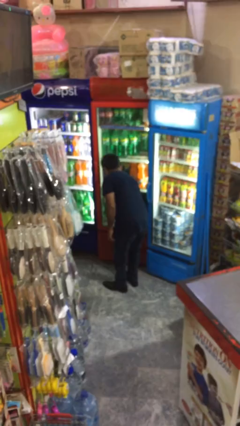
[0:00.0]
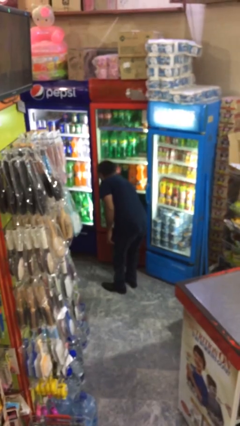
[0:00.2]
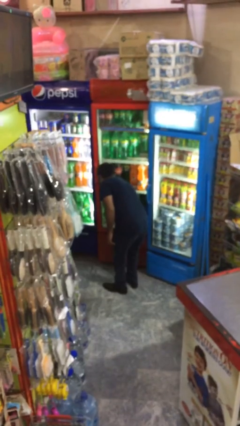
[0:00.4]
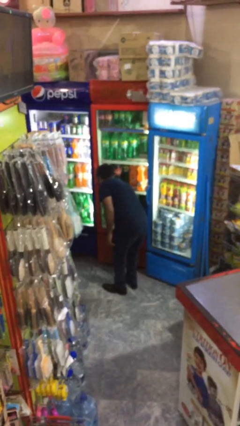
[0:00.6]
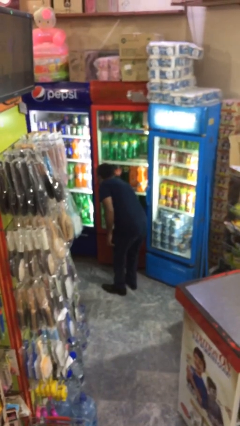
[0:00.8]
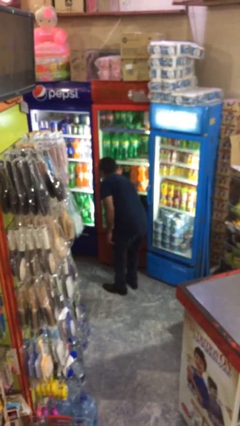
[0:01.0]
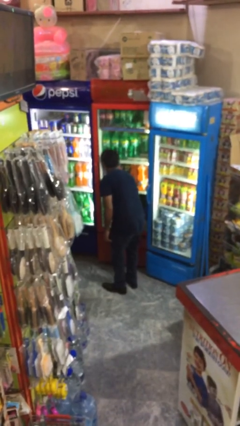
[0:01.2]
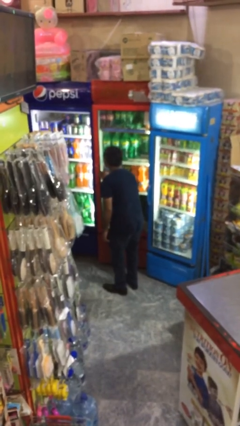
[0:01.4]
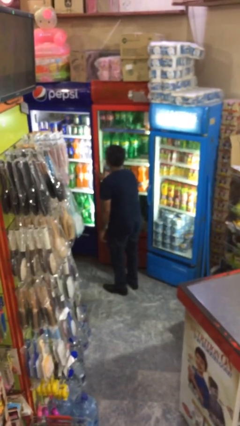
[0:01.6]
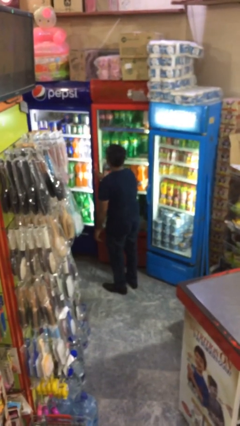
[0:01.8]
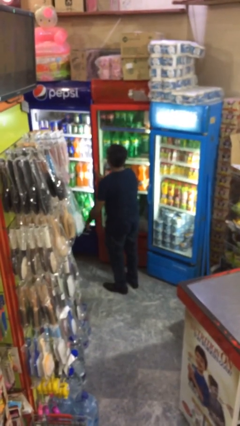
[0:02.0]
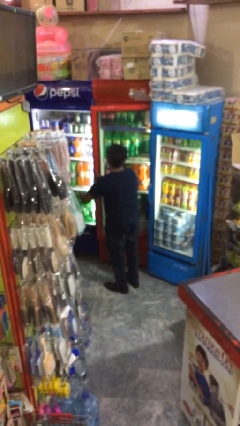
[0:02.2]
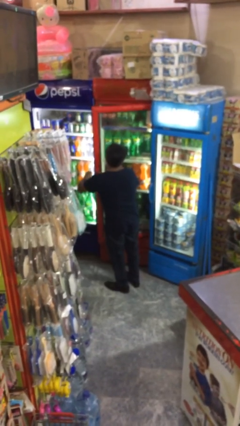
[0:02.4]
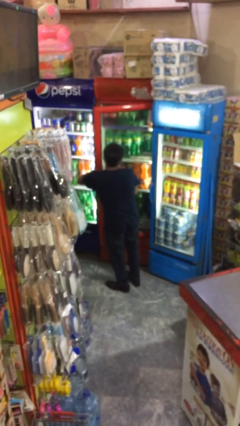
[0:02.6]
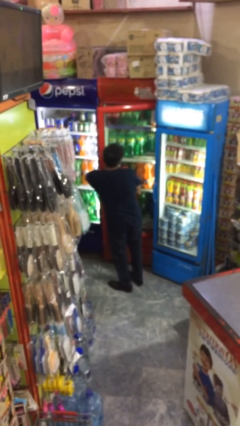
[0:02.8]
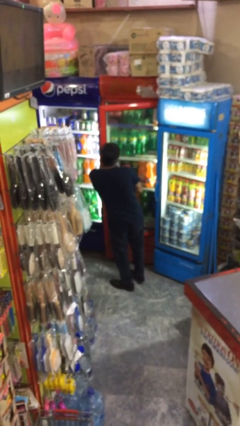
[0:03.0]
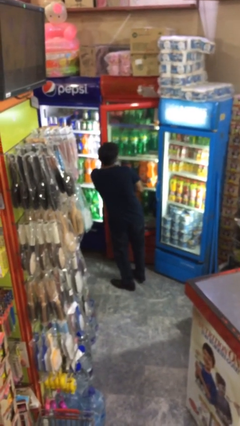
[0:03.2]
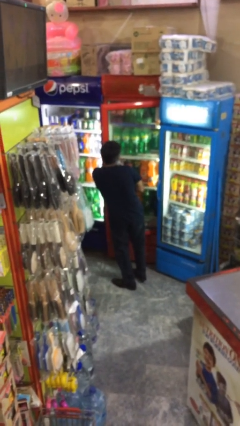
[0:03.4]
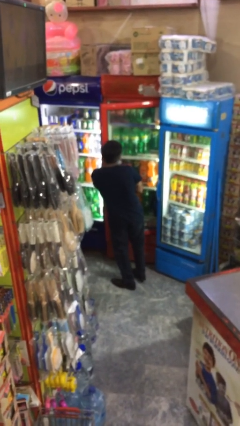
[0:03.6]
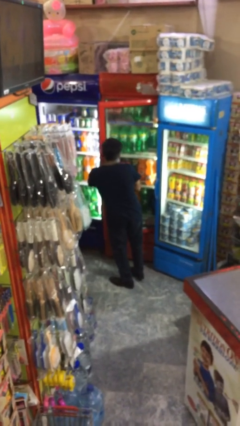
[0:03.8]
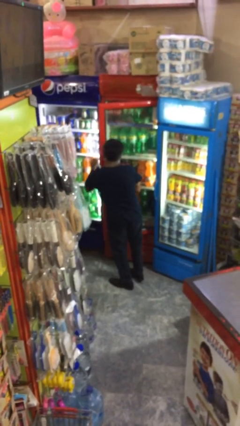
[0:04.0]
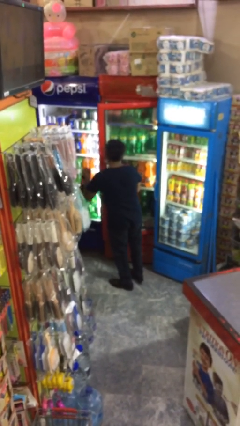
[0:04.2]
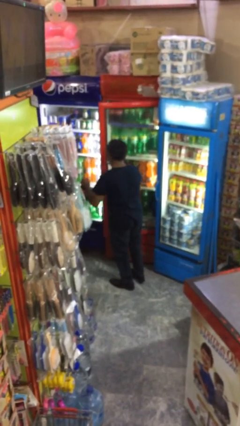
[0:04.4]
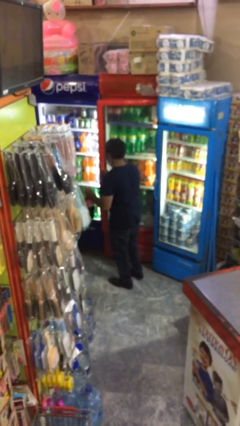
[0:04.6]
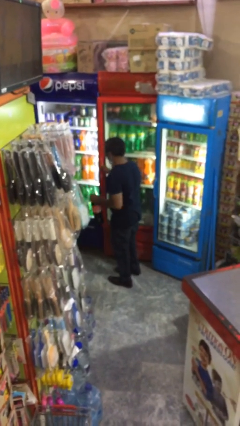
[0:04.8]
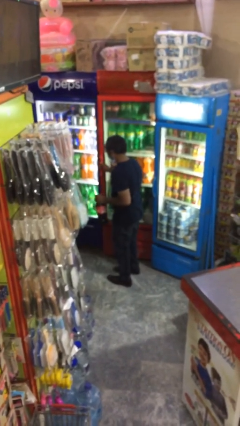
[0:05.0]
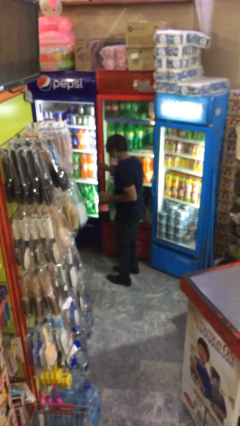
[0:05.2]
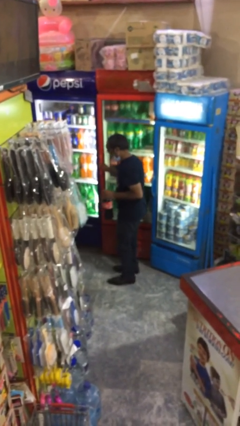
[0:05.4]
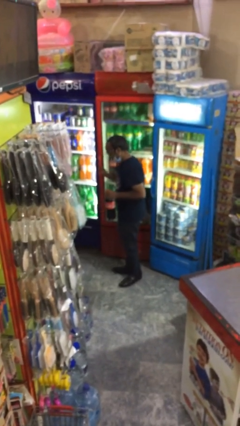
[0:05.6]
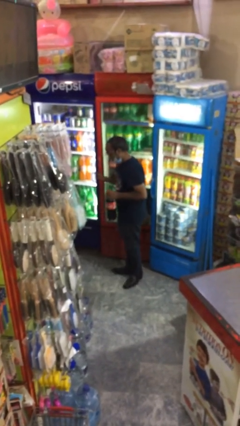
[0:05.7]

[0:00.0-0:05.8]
person purchases from machine

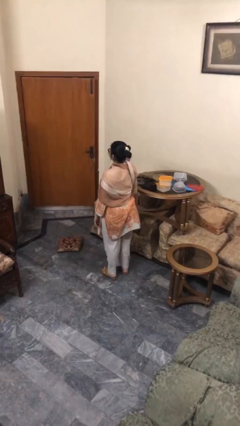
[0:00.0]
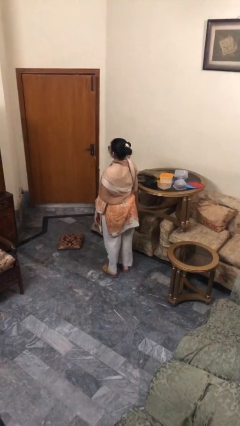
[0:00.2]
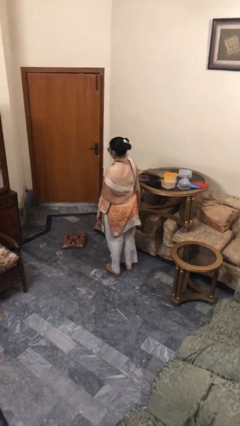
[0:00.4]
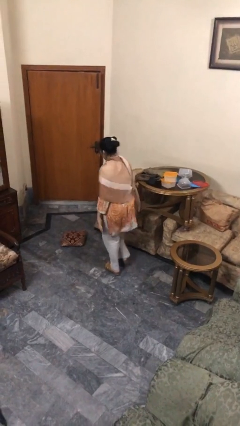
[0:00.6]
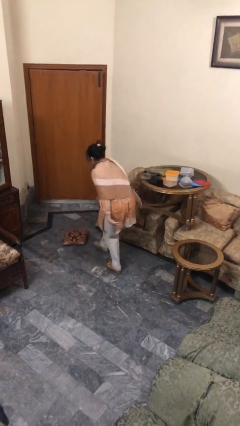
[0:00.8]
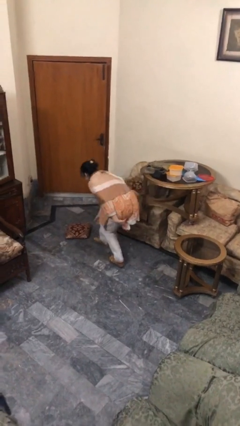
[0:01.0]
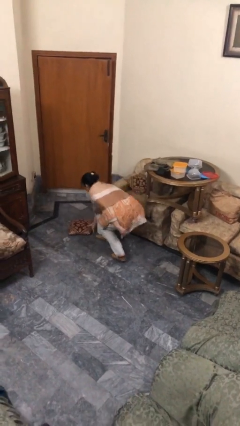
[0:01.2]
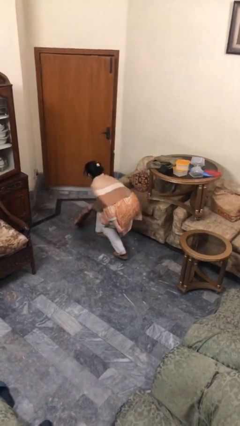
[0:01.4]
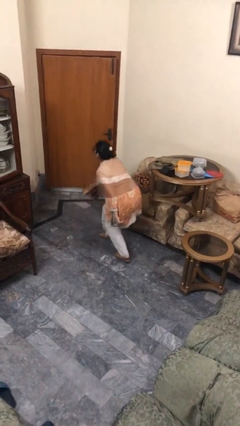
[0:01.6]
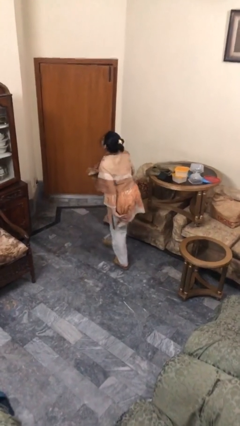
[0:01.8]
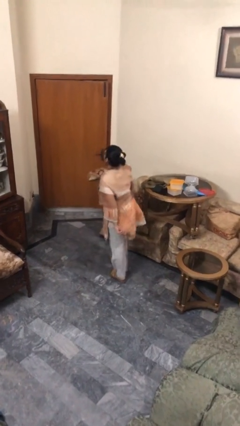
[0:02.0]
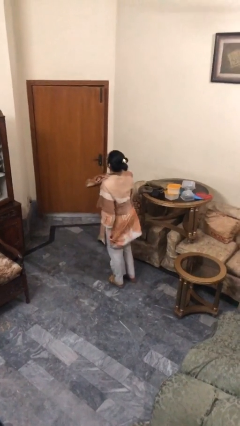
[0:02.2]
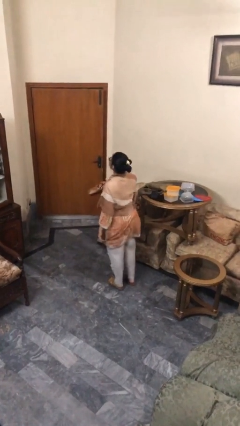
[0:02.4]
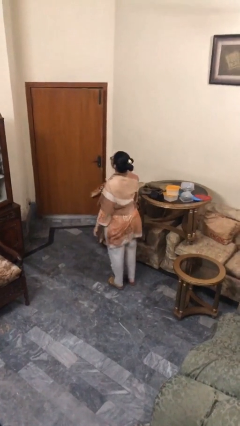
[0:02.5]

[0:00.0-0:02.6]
person picks up object from floor

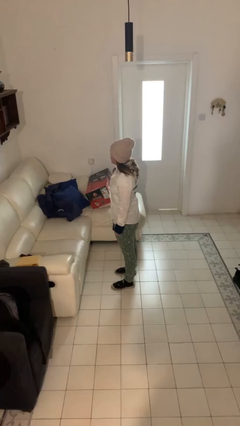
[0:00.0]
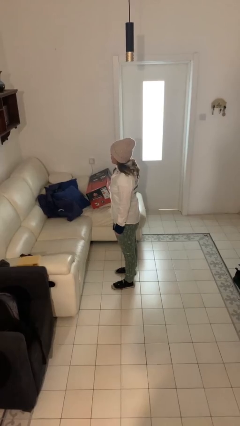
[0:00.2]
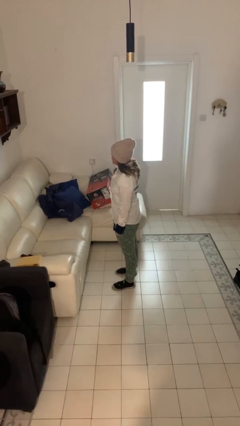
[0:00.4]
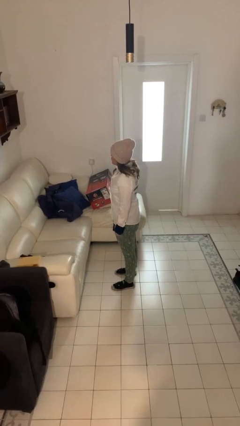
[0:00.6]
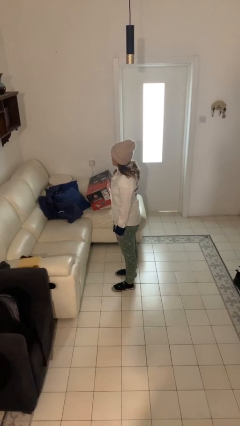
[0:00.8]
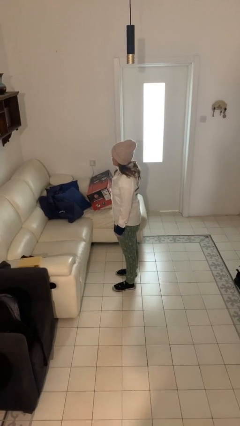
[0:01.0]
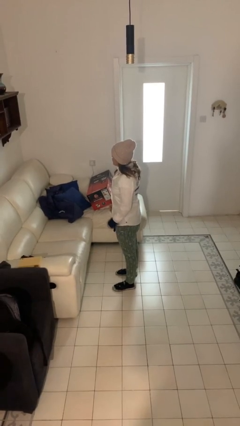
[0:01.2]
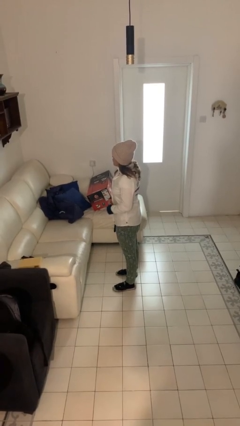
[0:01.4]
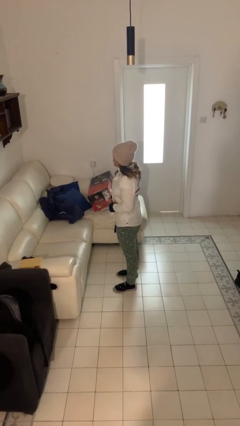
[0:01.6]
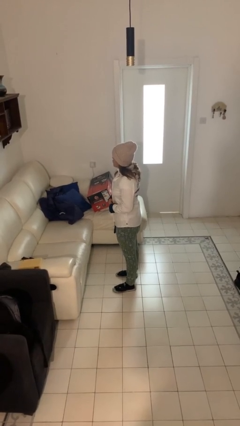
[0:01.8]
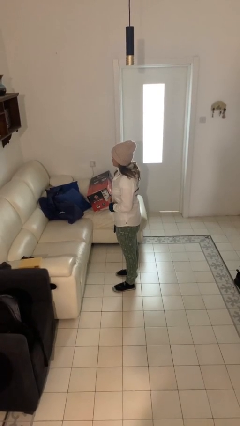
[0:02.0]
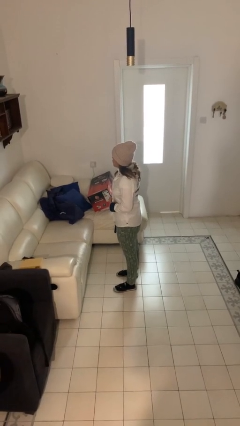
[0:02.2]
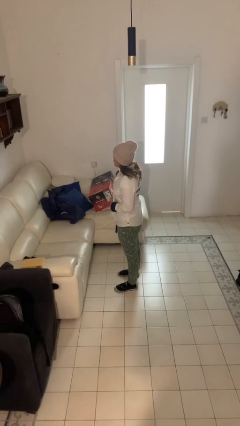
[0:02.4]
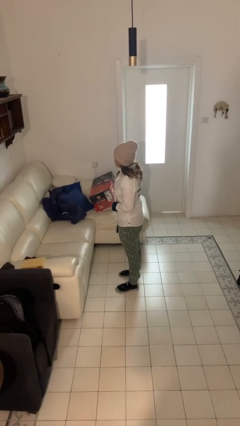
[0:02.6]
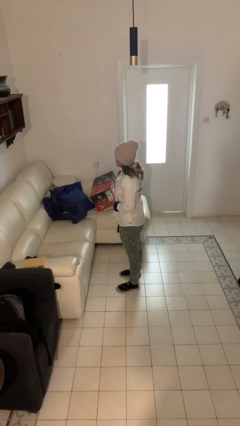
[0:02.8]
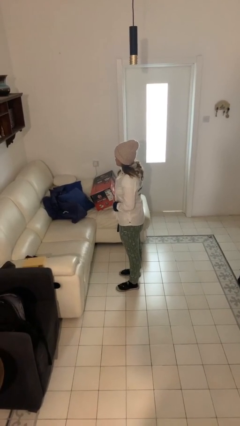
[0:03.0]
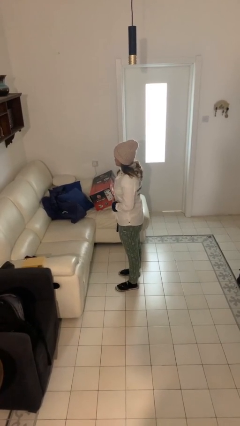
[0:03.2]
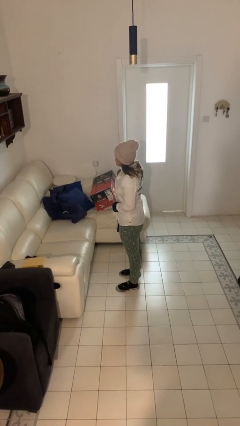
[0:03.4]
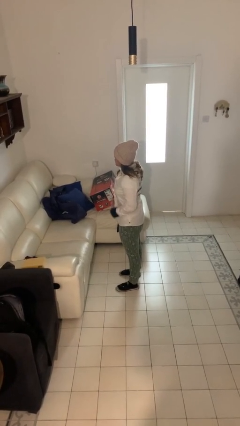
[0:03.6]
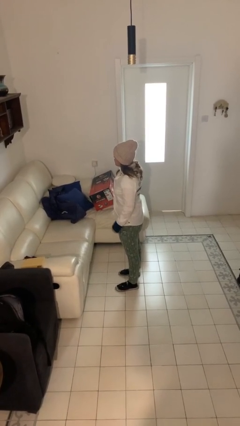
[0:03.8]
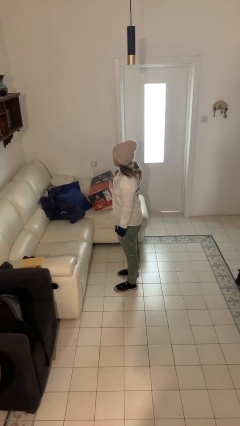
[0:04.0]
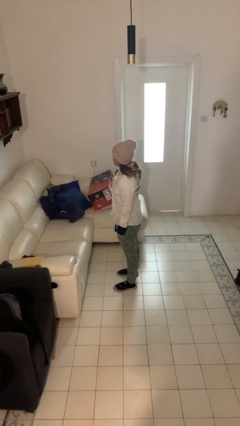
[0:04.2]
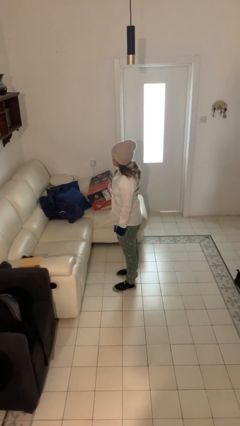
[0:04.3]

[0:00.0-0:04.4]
person buttons shirt

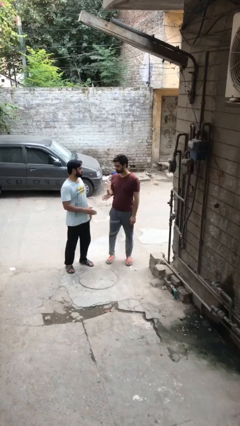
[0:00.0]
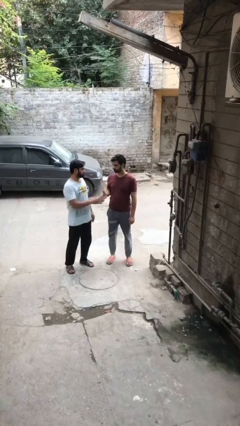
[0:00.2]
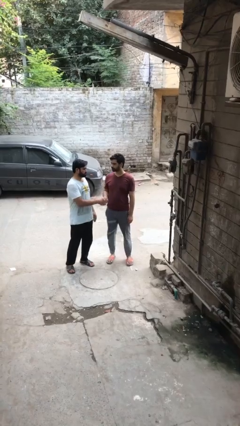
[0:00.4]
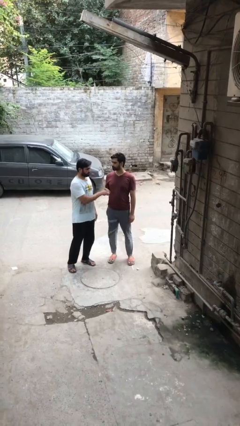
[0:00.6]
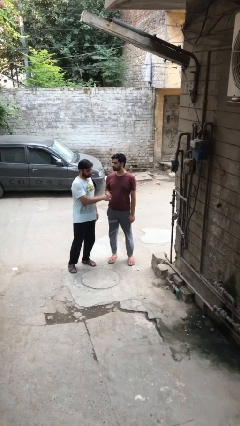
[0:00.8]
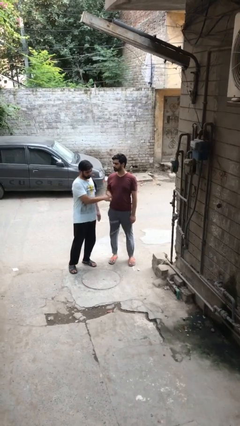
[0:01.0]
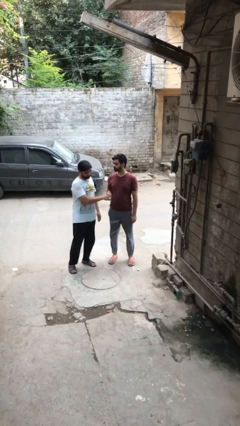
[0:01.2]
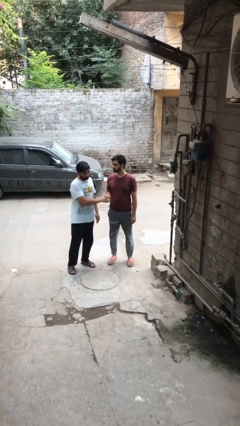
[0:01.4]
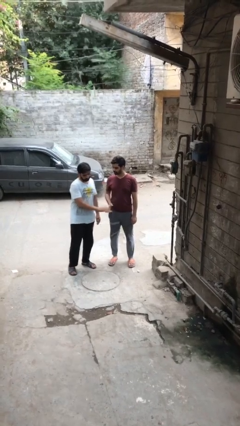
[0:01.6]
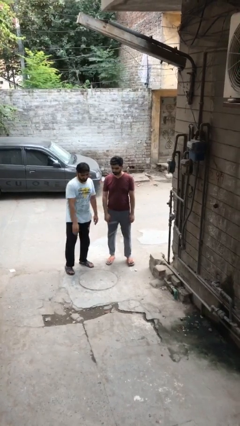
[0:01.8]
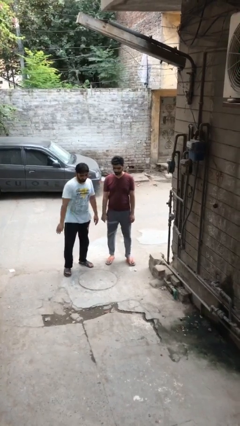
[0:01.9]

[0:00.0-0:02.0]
person shakes hand

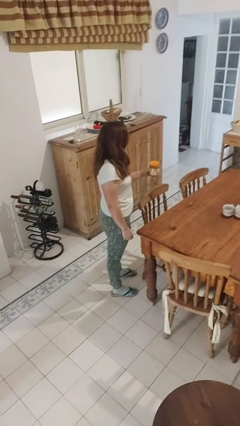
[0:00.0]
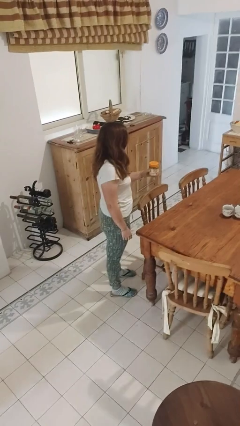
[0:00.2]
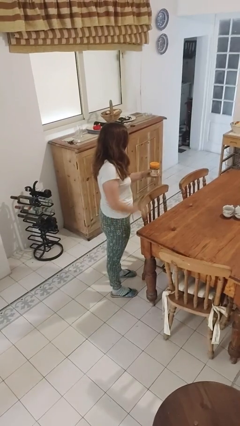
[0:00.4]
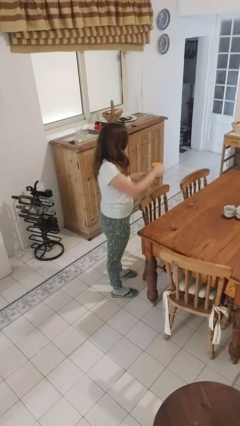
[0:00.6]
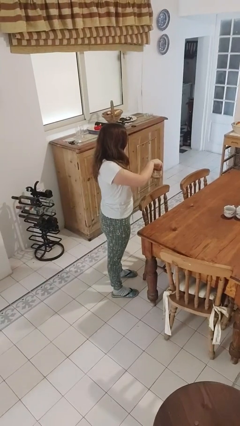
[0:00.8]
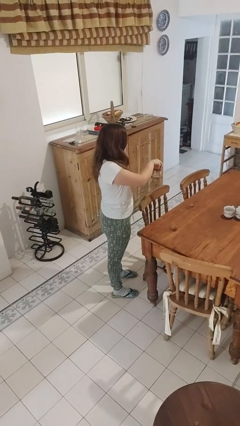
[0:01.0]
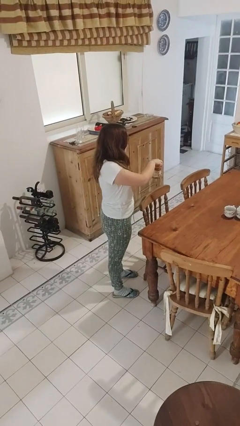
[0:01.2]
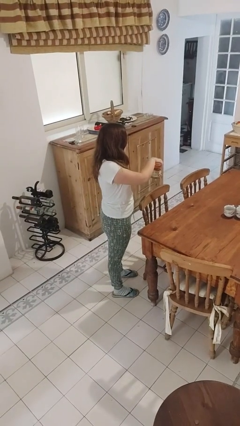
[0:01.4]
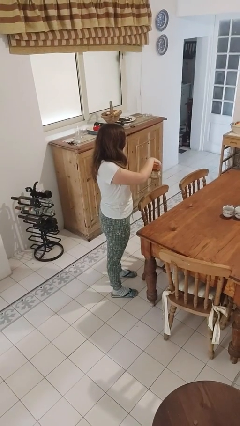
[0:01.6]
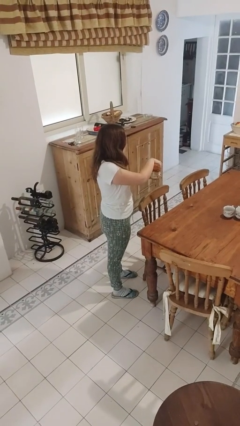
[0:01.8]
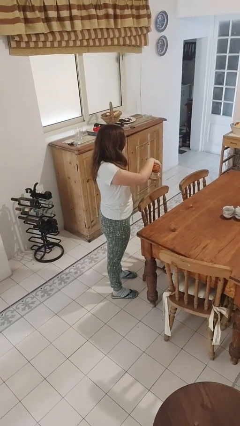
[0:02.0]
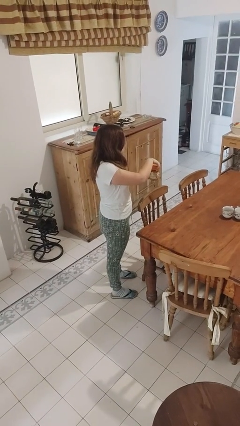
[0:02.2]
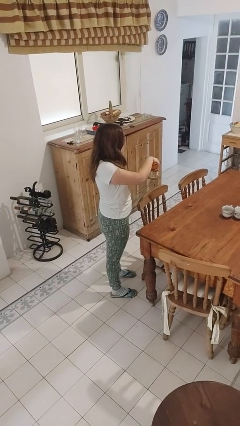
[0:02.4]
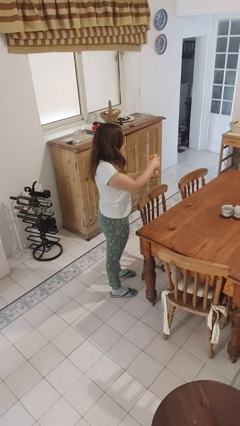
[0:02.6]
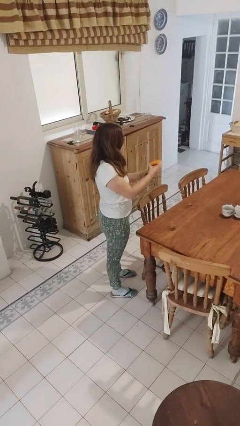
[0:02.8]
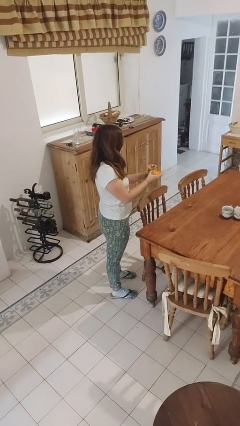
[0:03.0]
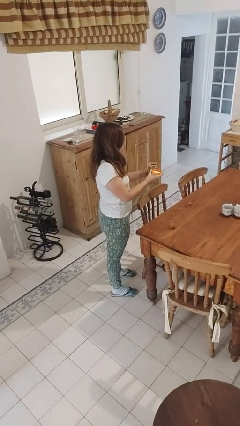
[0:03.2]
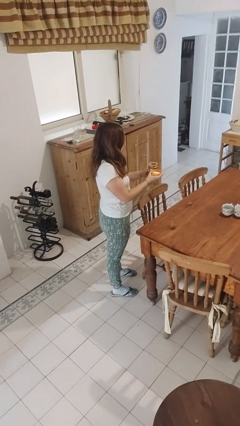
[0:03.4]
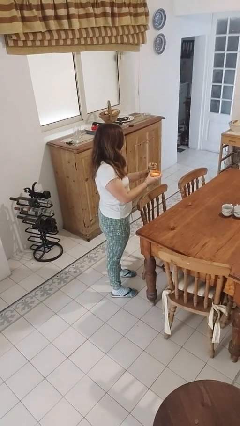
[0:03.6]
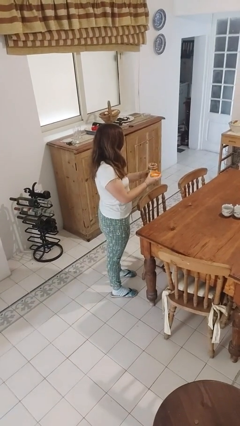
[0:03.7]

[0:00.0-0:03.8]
person opens jar
